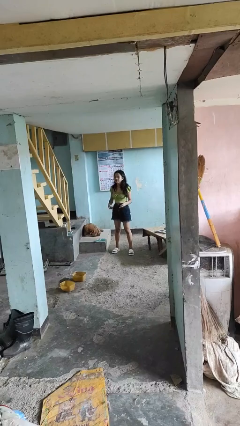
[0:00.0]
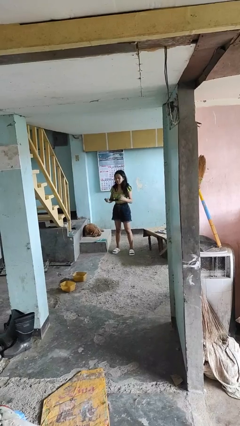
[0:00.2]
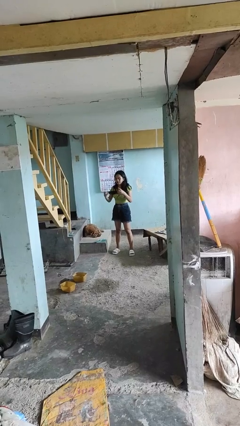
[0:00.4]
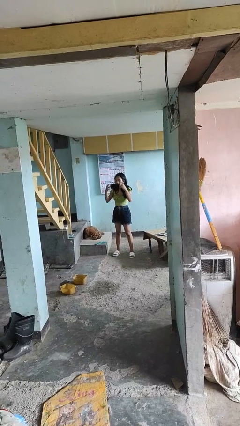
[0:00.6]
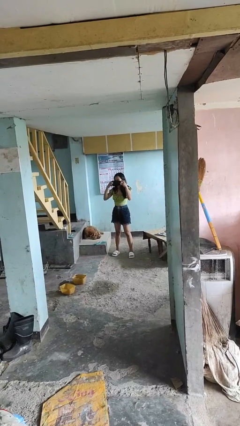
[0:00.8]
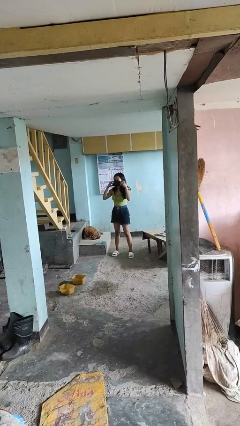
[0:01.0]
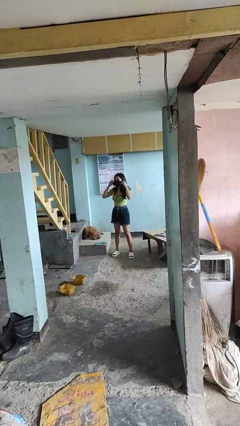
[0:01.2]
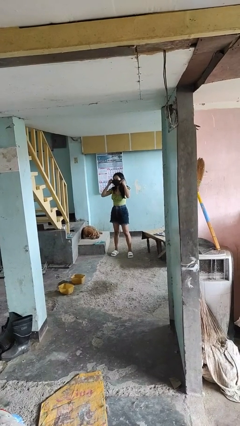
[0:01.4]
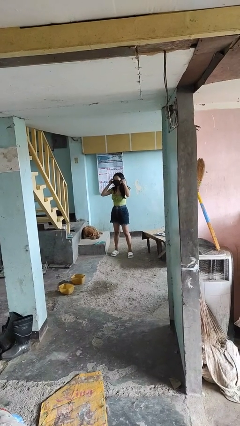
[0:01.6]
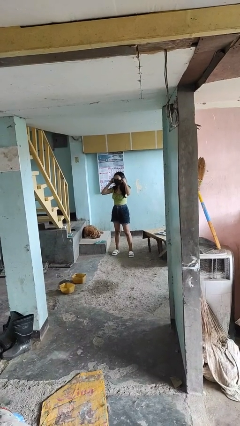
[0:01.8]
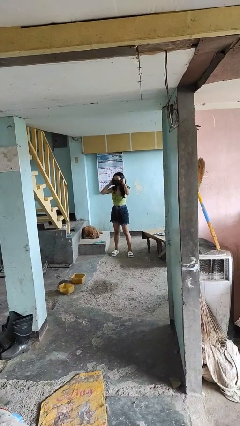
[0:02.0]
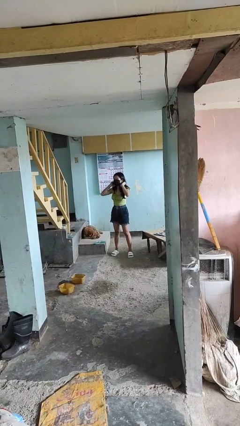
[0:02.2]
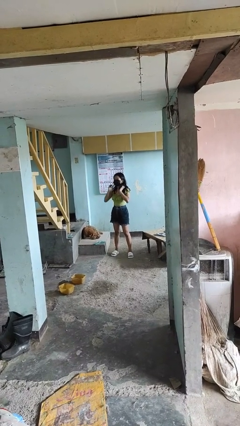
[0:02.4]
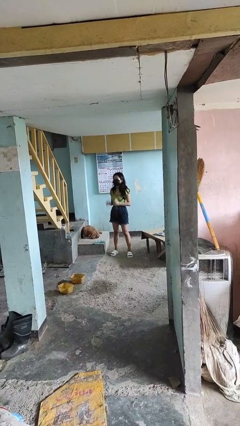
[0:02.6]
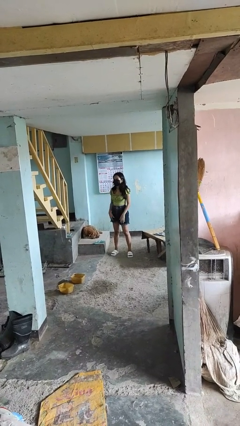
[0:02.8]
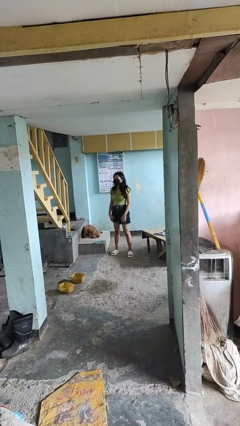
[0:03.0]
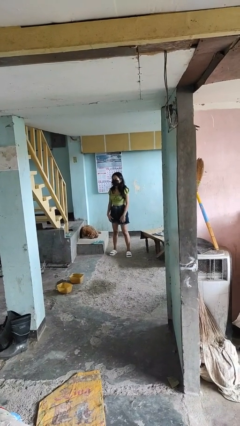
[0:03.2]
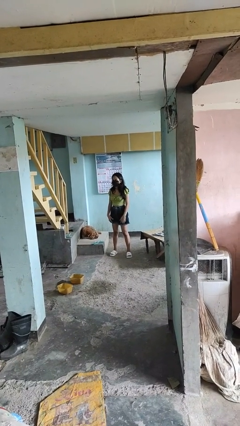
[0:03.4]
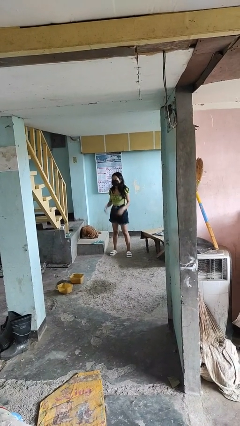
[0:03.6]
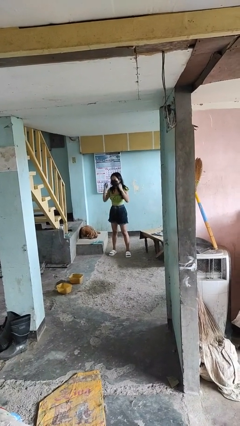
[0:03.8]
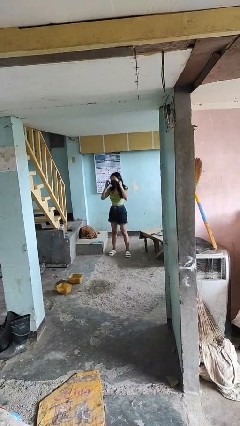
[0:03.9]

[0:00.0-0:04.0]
person puts on facemask

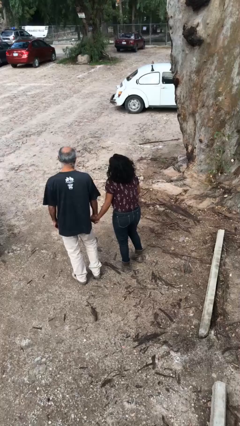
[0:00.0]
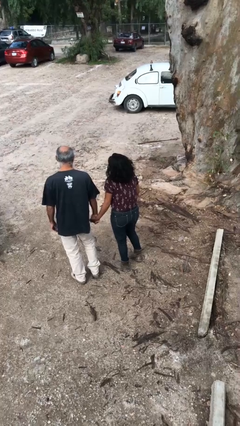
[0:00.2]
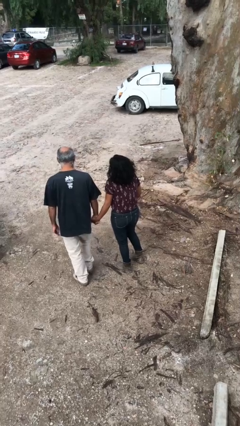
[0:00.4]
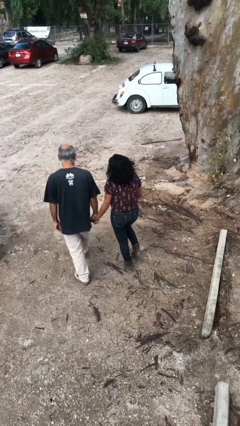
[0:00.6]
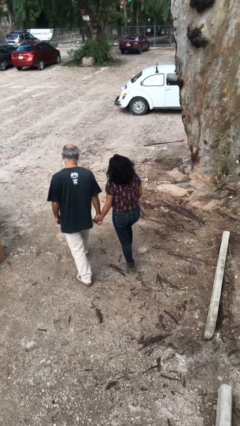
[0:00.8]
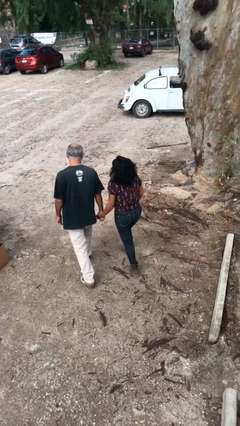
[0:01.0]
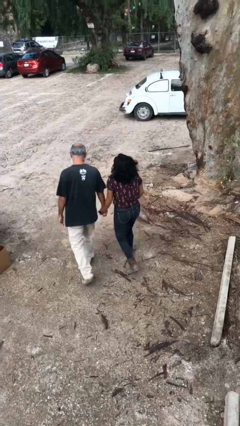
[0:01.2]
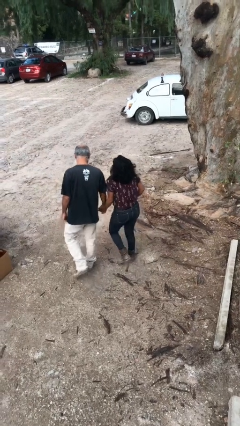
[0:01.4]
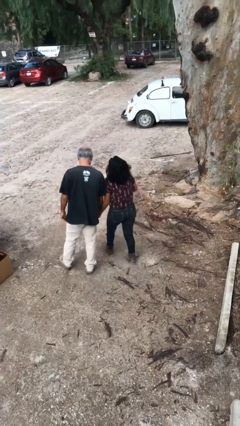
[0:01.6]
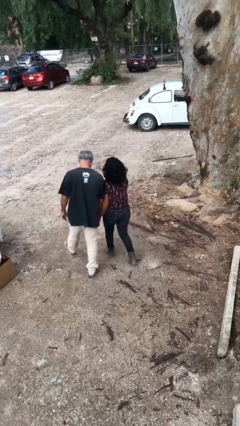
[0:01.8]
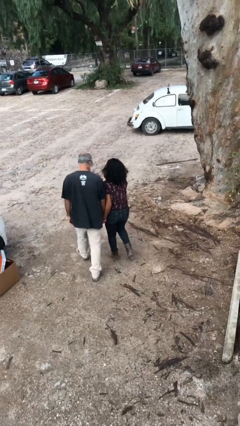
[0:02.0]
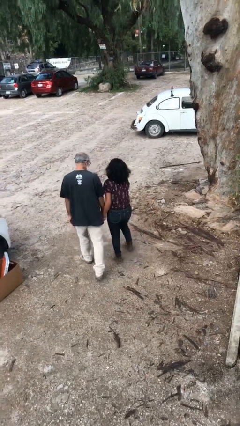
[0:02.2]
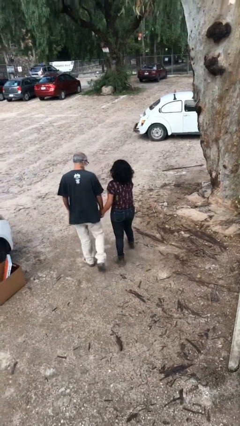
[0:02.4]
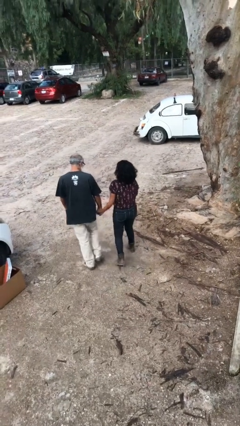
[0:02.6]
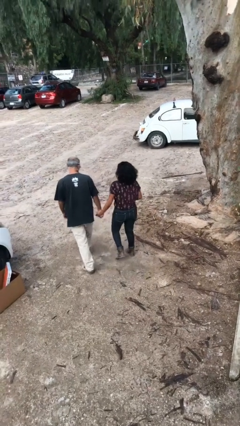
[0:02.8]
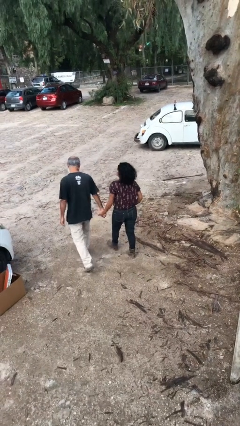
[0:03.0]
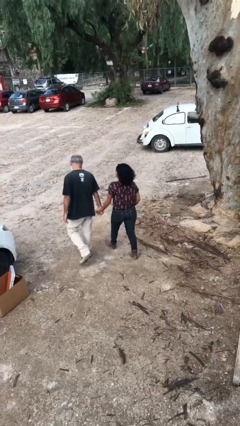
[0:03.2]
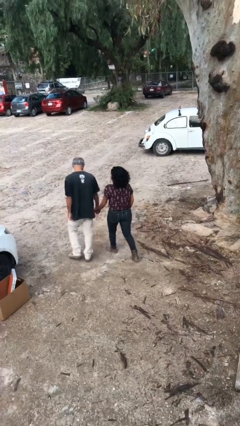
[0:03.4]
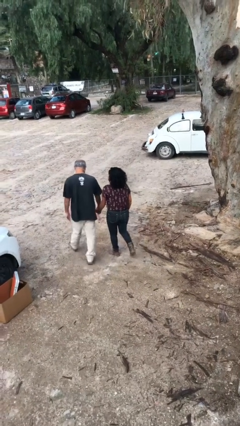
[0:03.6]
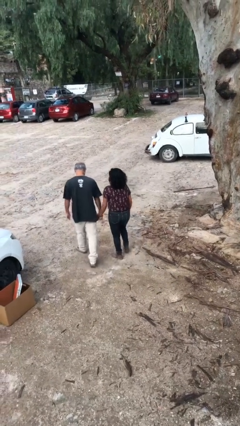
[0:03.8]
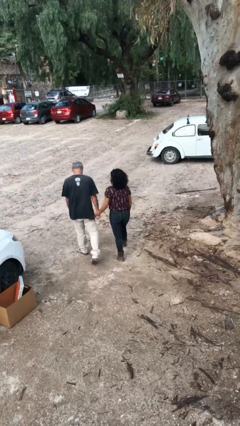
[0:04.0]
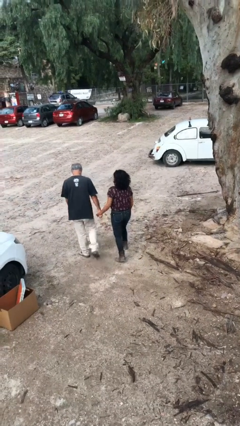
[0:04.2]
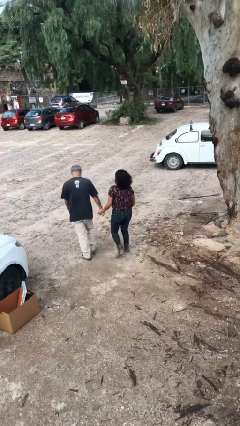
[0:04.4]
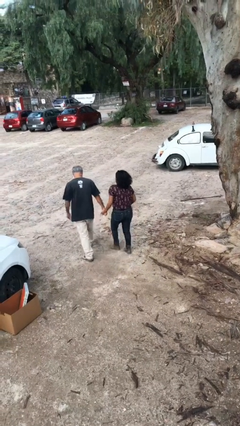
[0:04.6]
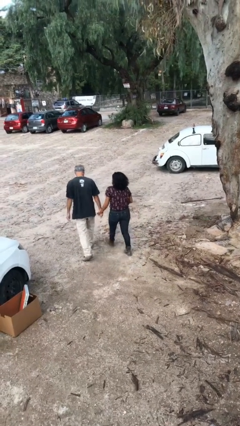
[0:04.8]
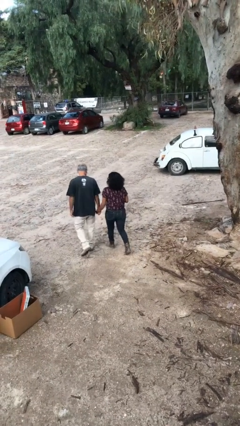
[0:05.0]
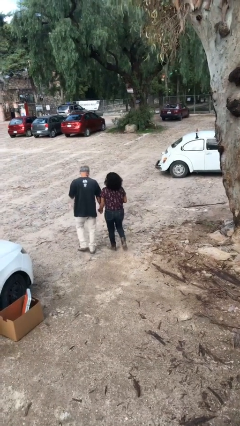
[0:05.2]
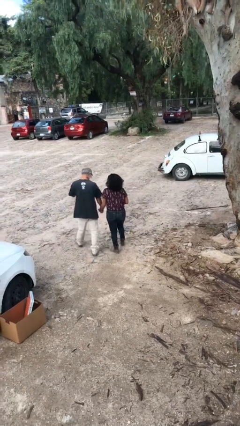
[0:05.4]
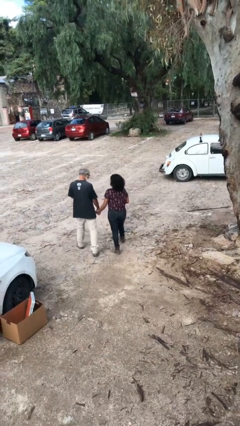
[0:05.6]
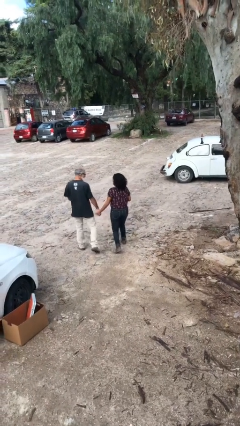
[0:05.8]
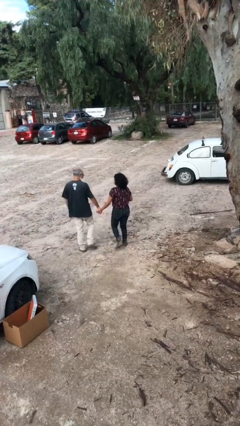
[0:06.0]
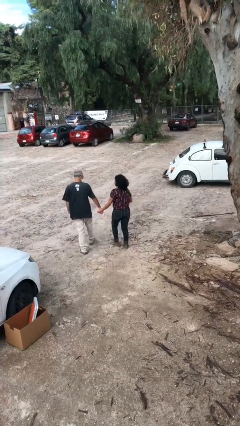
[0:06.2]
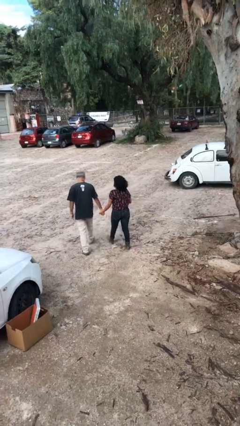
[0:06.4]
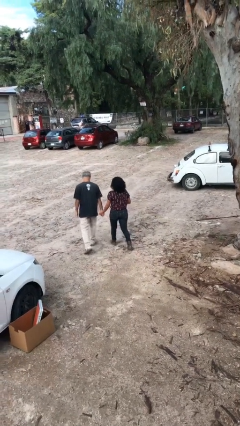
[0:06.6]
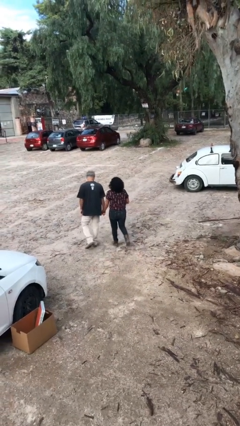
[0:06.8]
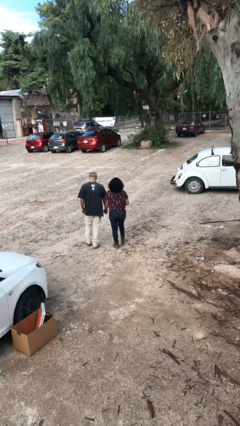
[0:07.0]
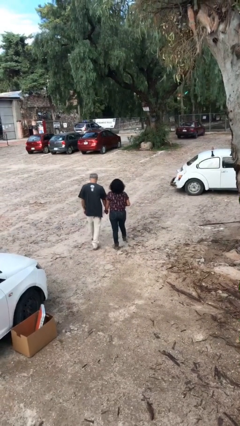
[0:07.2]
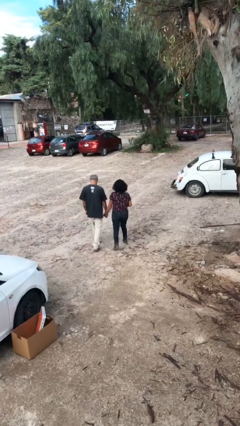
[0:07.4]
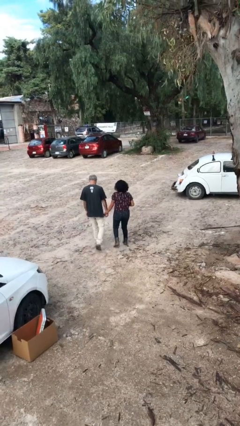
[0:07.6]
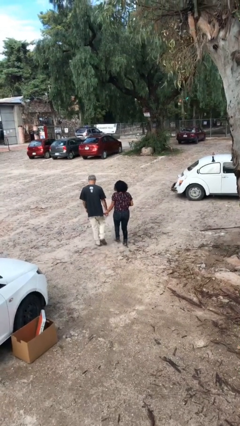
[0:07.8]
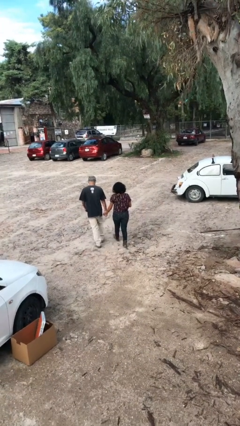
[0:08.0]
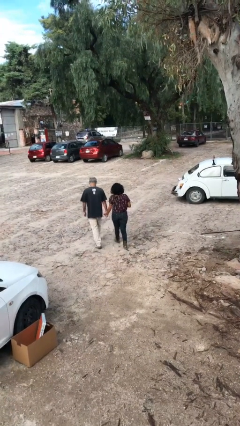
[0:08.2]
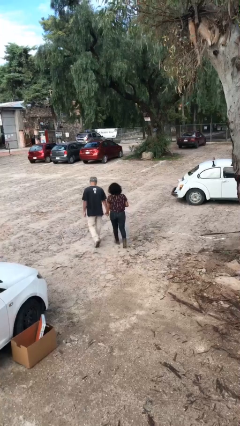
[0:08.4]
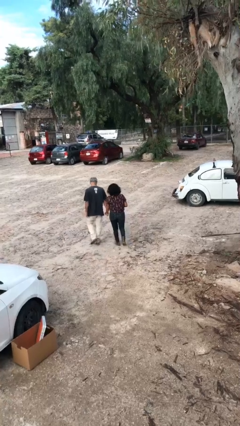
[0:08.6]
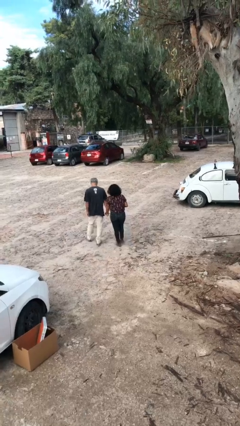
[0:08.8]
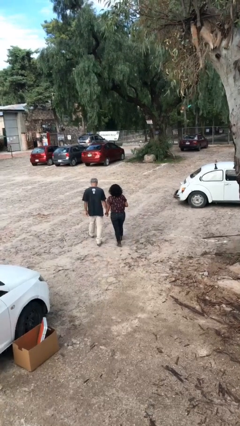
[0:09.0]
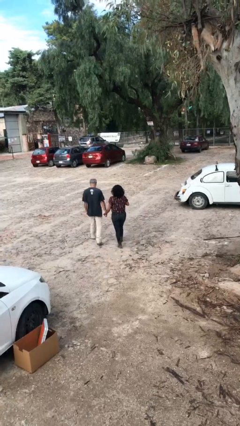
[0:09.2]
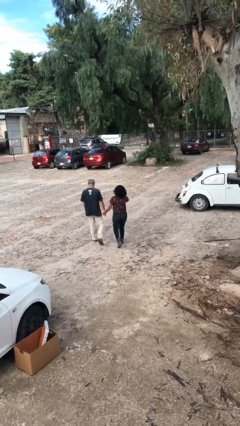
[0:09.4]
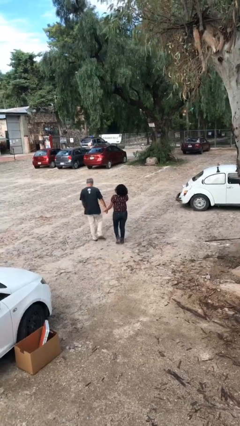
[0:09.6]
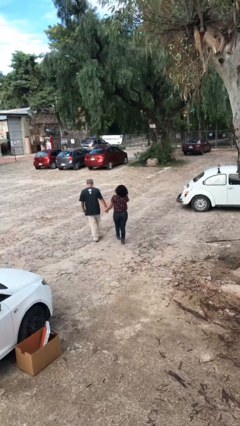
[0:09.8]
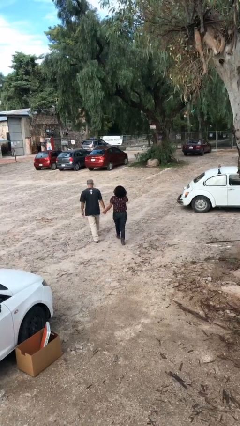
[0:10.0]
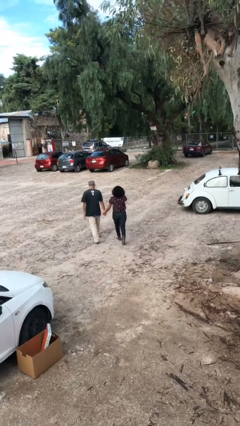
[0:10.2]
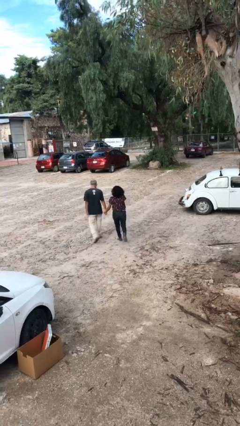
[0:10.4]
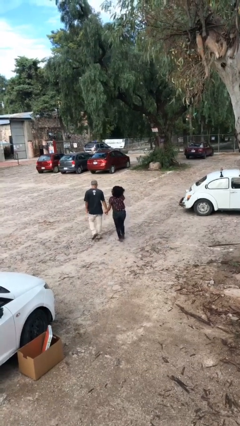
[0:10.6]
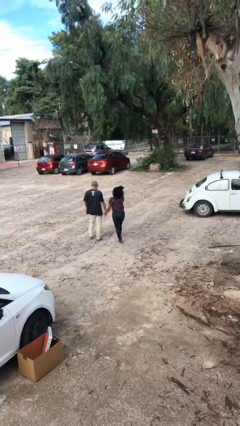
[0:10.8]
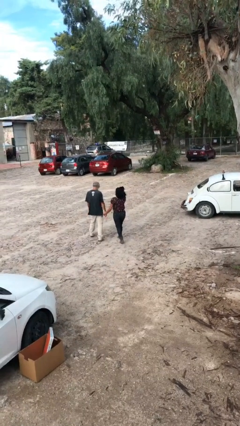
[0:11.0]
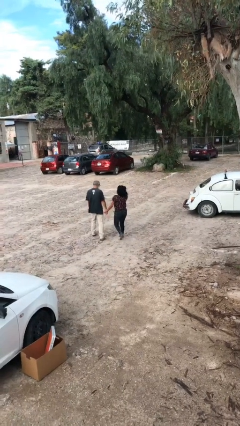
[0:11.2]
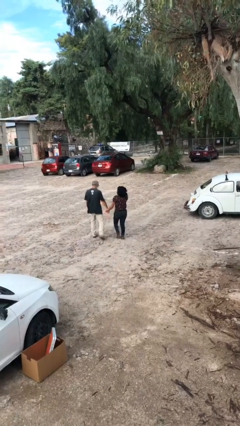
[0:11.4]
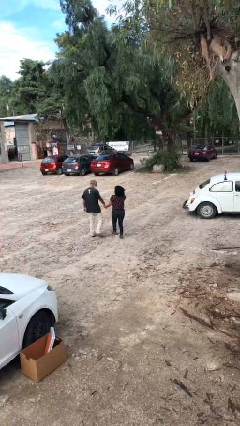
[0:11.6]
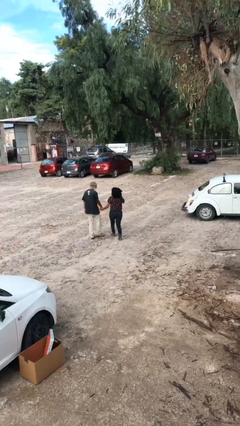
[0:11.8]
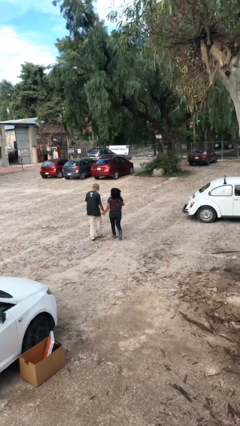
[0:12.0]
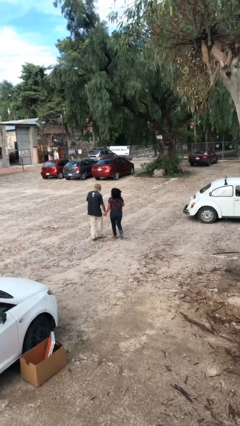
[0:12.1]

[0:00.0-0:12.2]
person holds hand

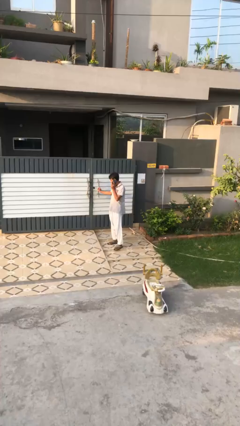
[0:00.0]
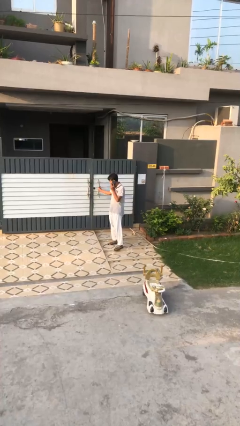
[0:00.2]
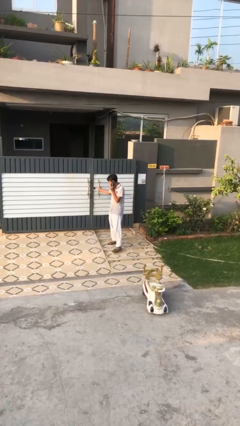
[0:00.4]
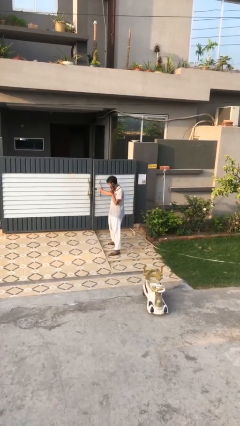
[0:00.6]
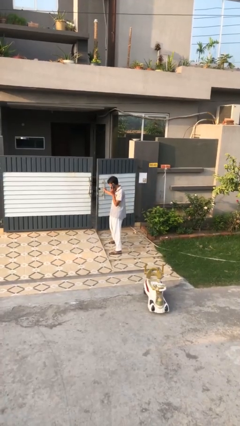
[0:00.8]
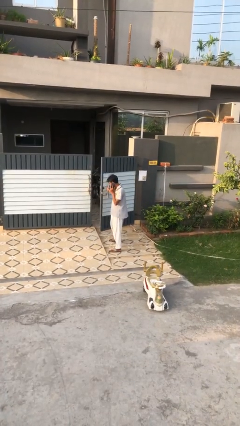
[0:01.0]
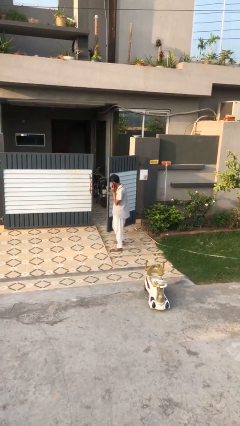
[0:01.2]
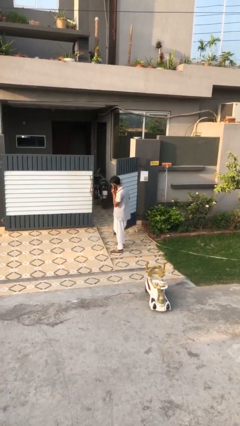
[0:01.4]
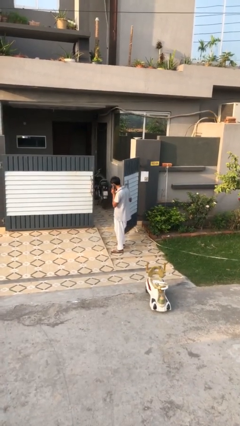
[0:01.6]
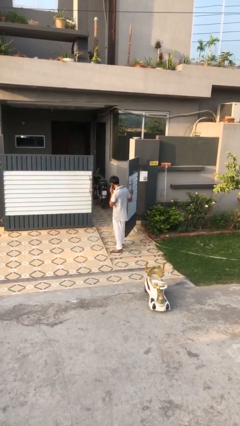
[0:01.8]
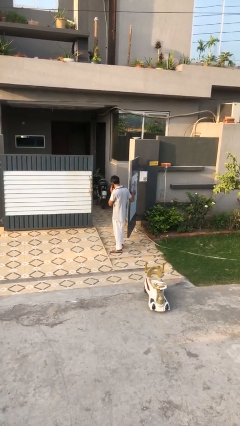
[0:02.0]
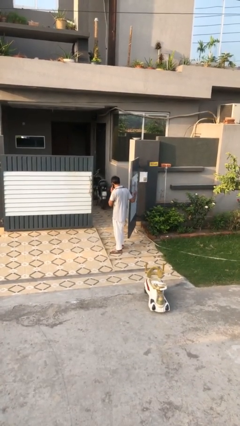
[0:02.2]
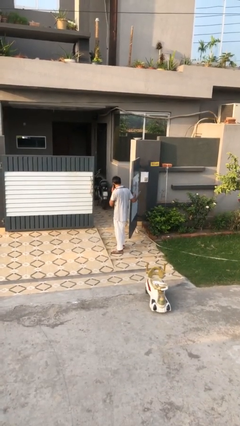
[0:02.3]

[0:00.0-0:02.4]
person opens facility door
